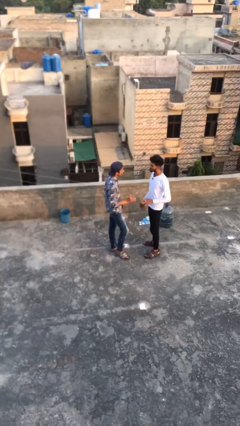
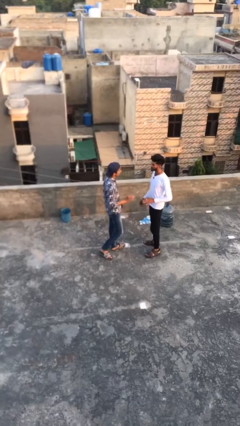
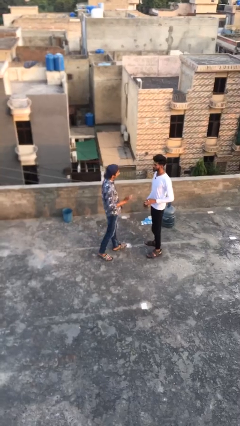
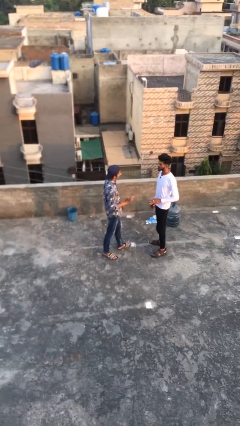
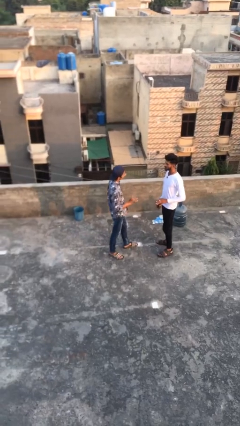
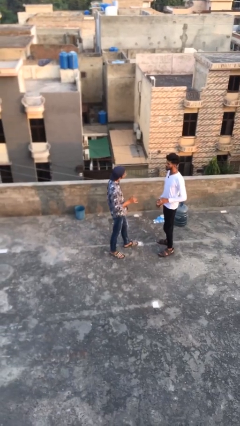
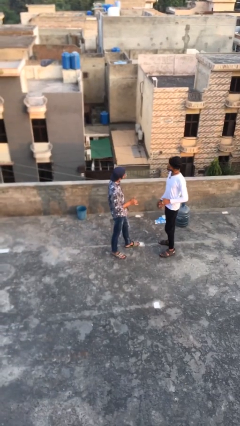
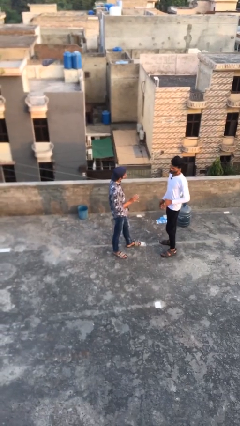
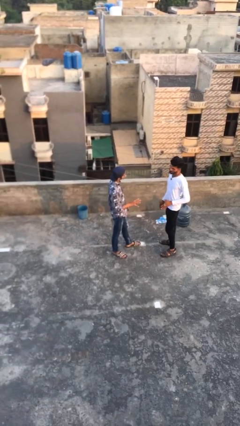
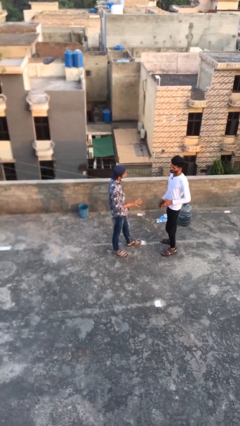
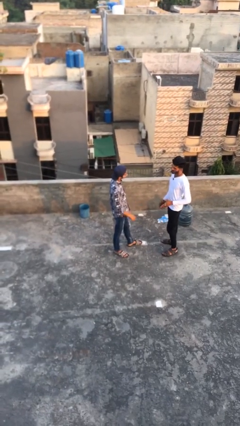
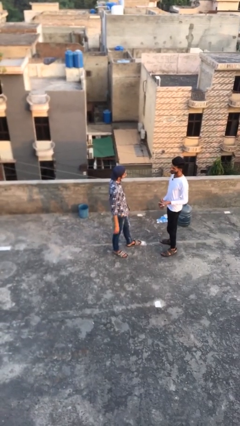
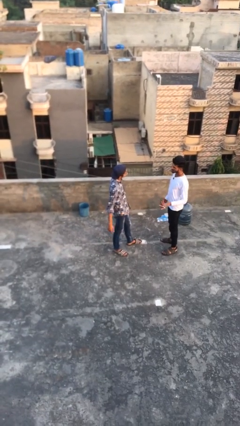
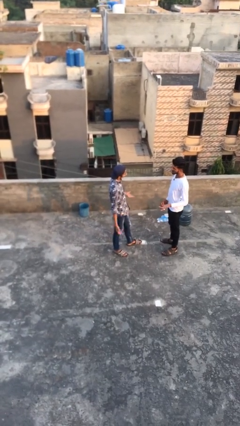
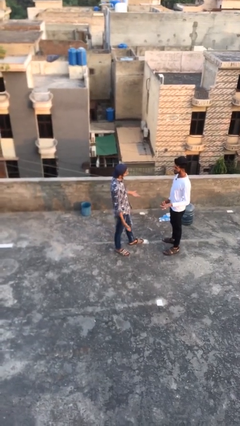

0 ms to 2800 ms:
person talks to person

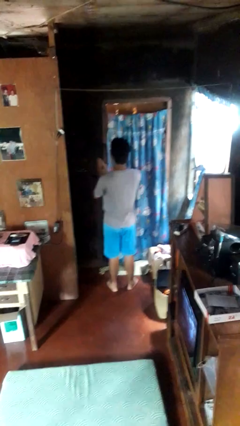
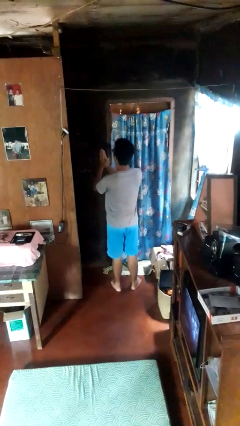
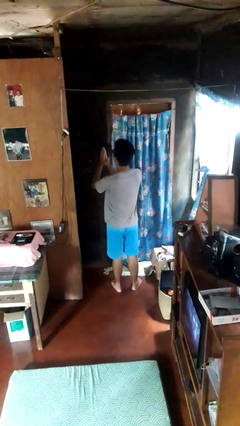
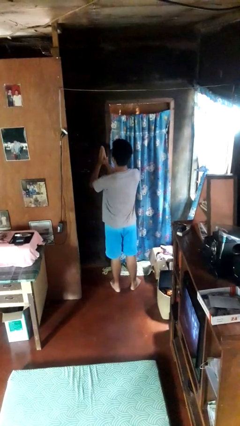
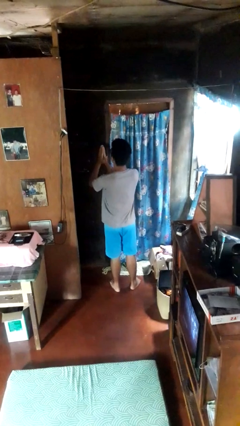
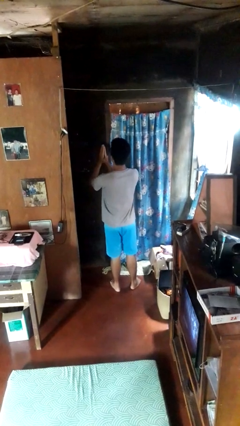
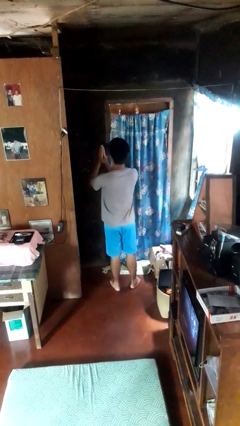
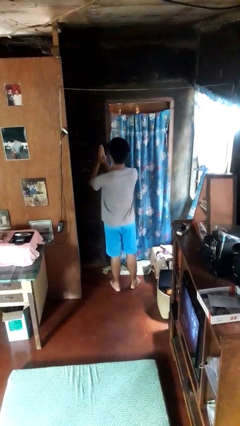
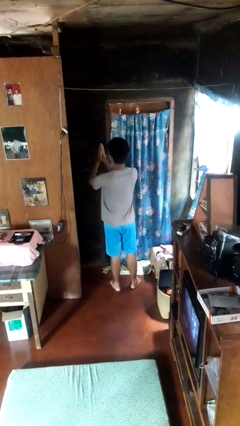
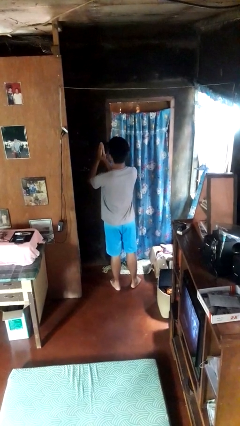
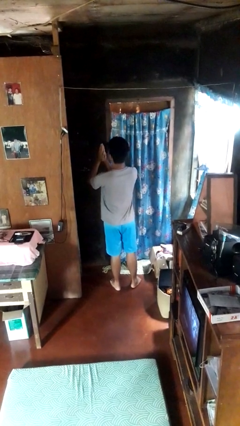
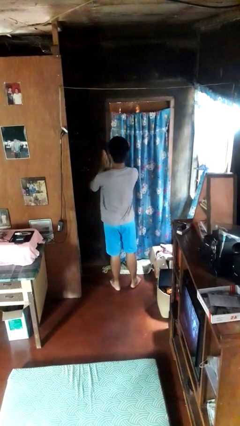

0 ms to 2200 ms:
person prays

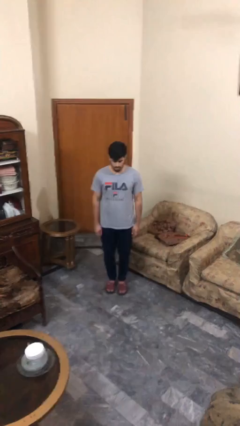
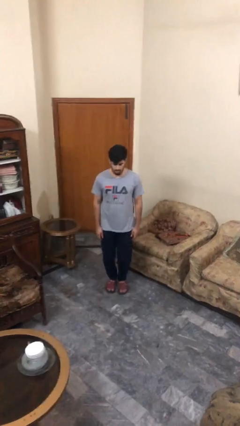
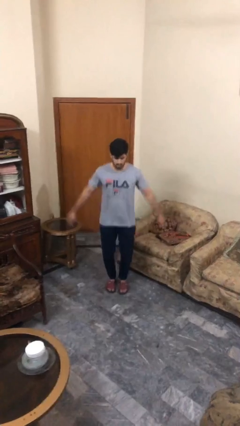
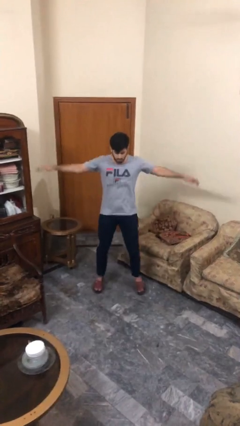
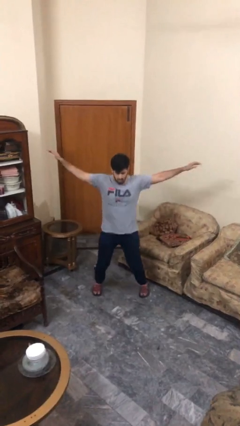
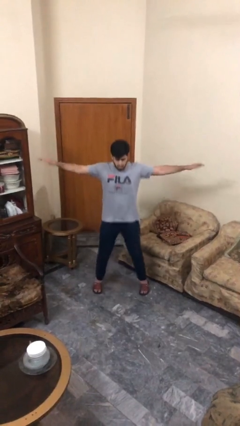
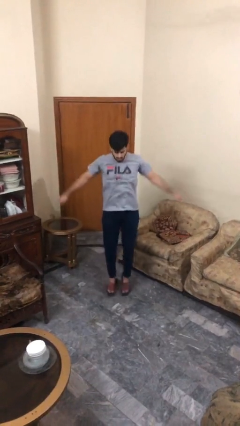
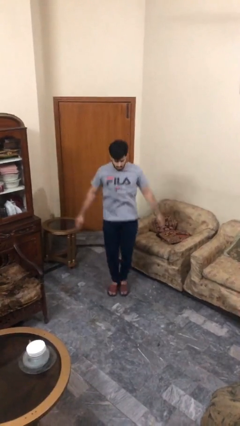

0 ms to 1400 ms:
person exercises with jumping jacks

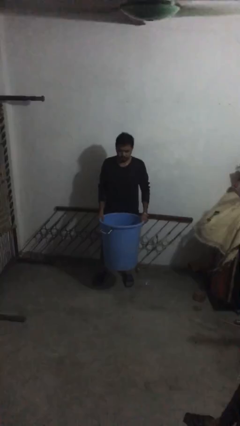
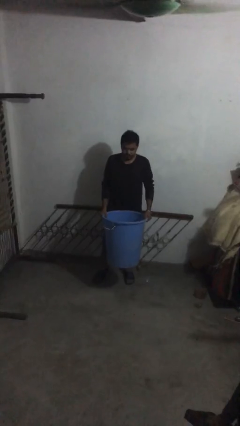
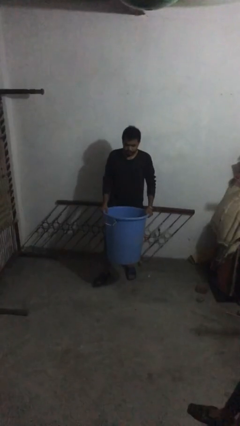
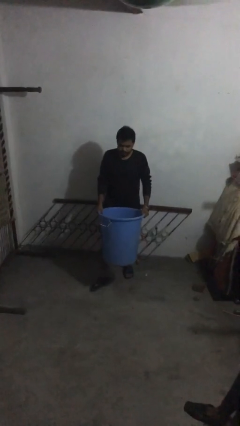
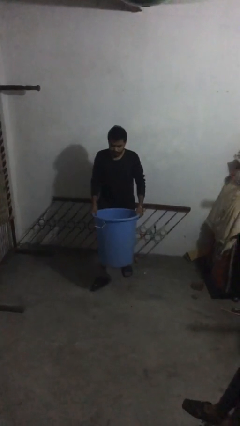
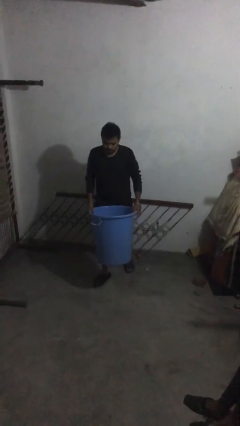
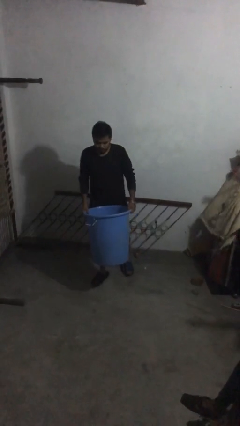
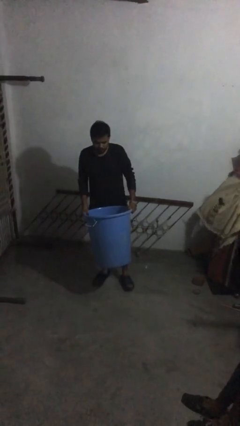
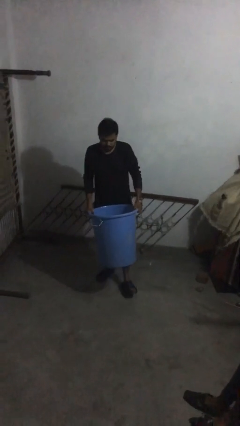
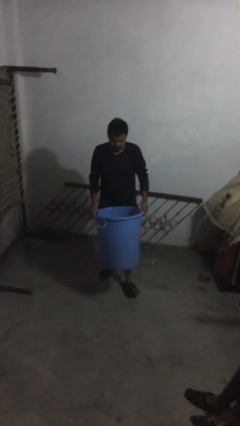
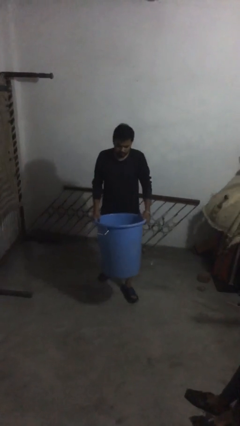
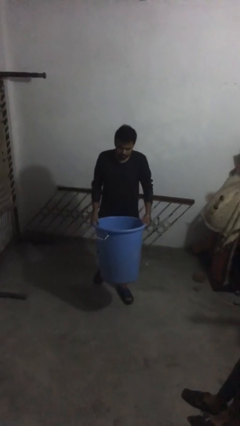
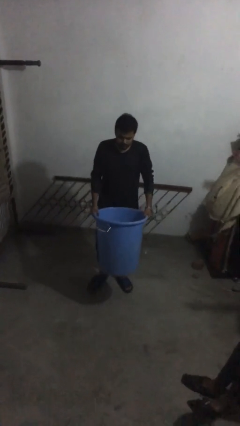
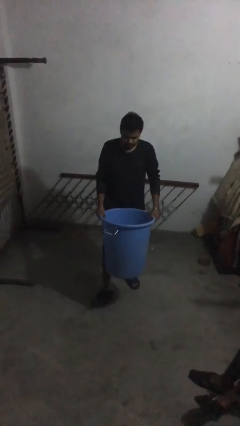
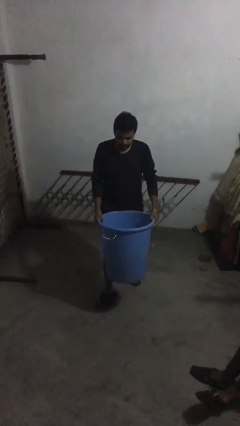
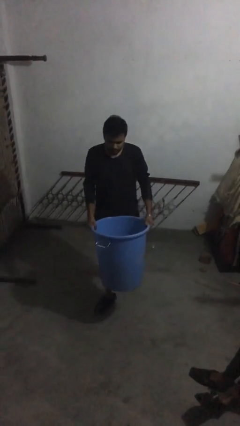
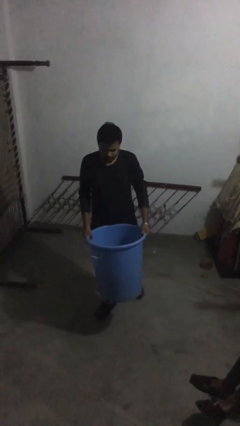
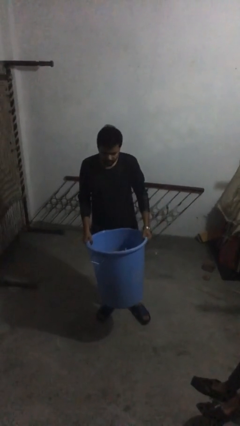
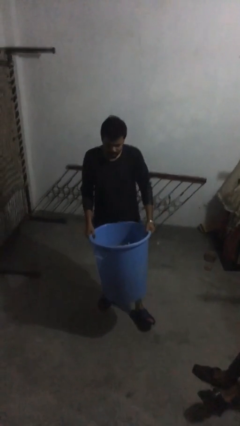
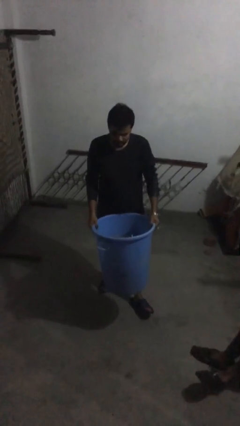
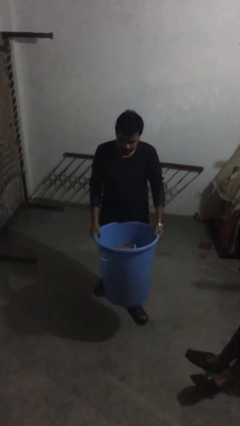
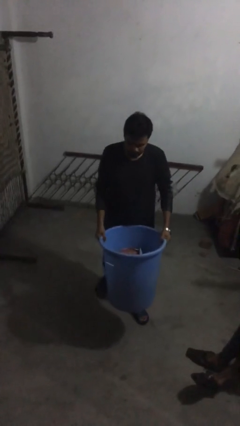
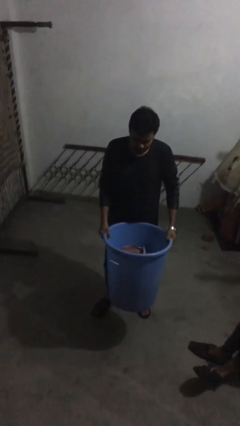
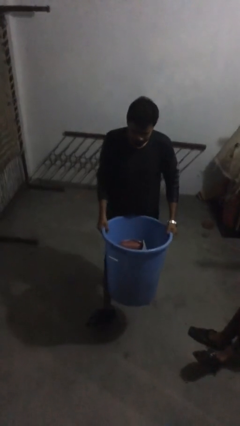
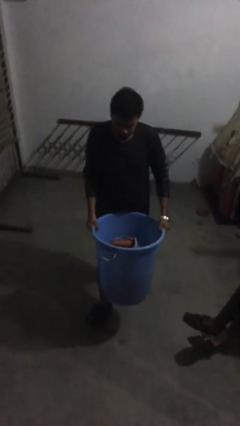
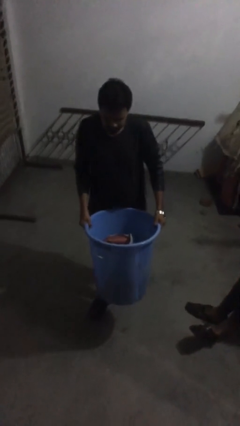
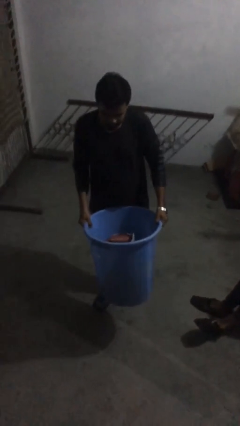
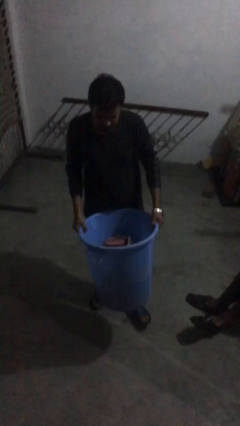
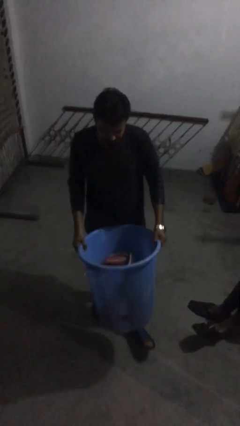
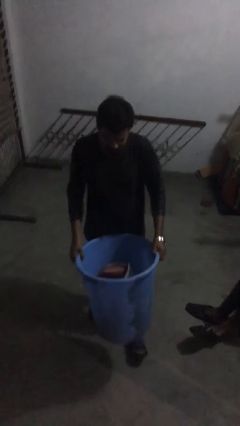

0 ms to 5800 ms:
person carries heavy object

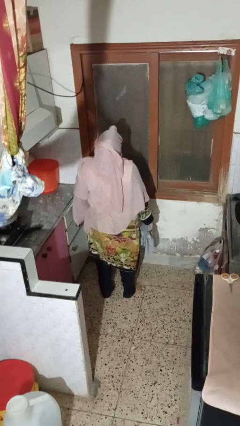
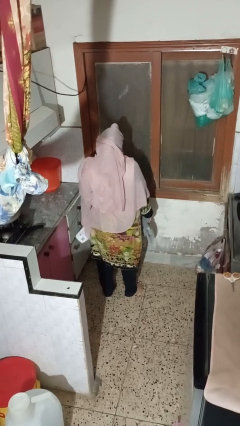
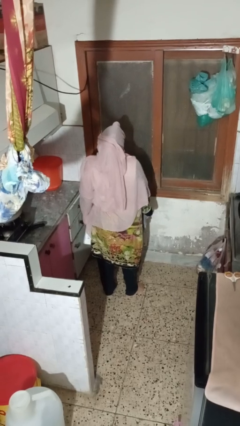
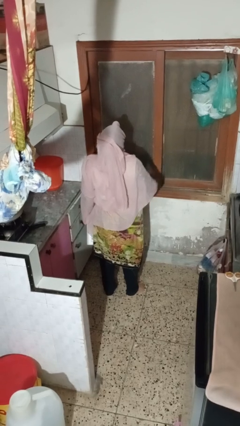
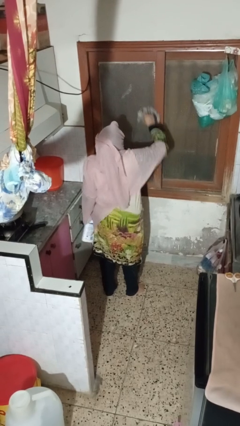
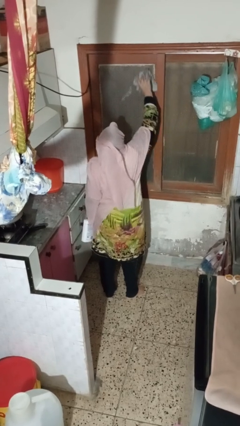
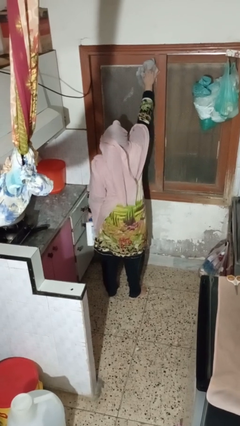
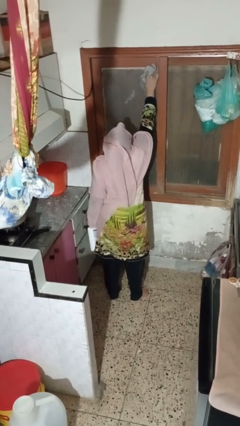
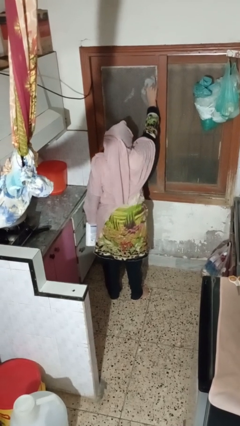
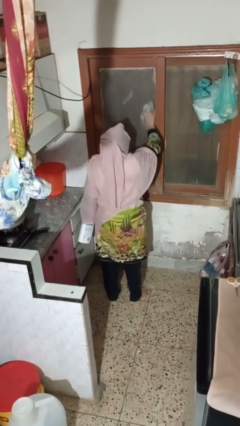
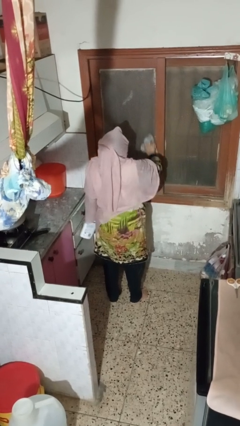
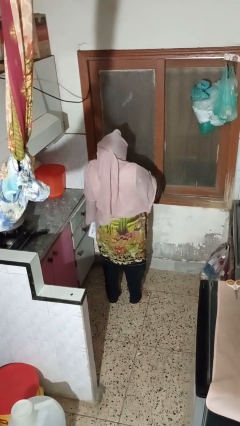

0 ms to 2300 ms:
person washes window

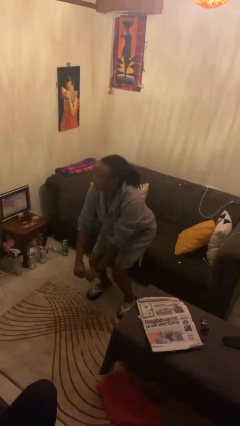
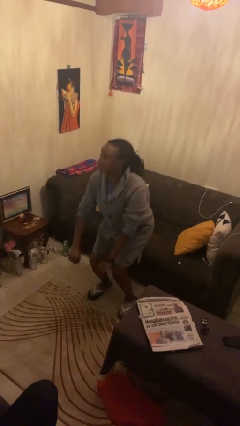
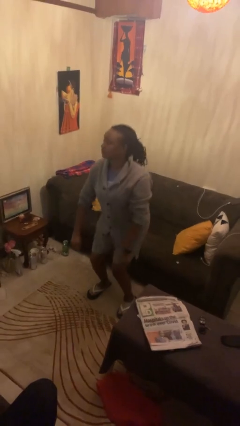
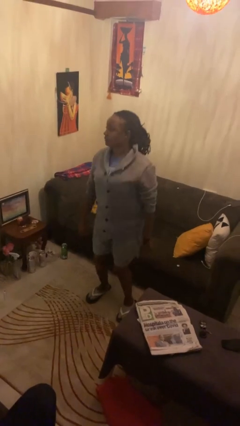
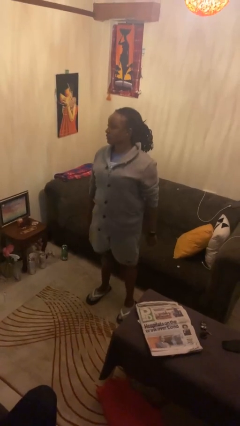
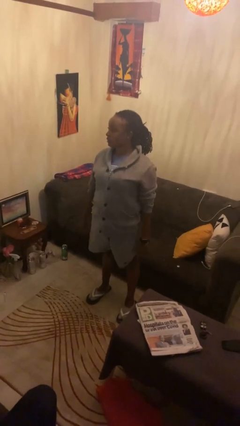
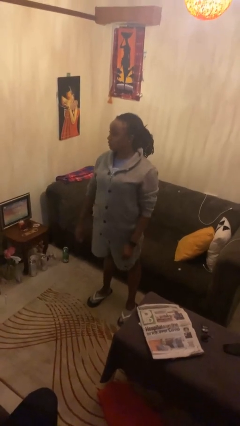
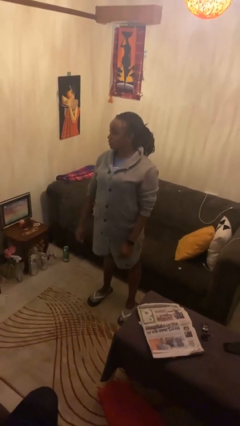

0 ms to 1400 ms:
person stands up

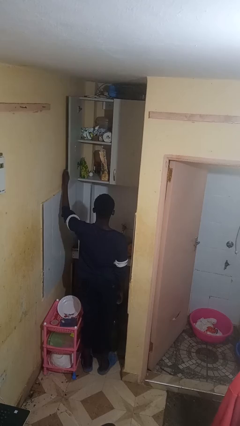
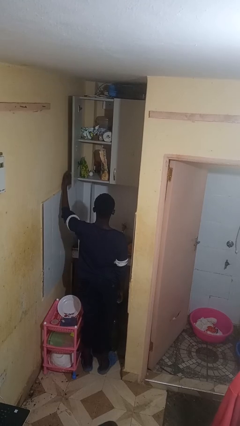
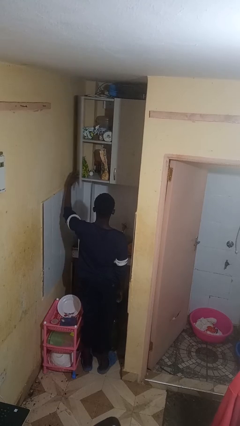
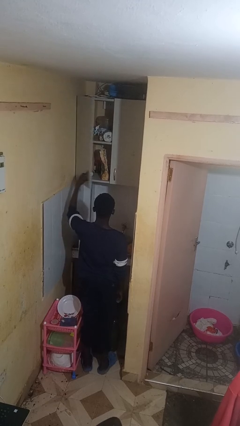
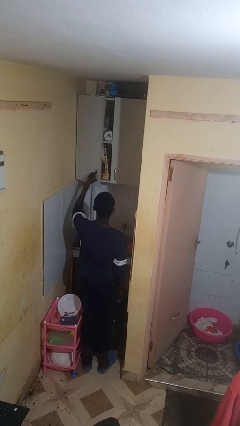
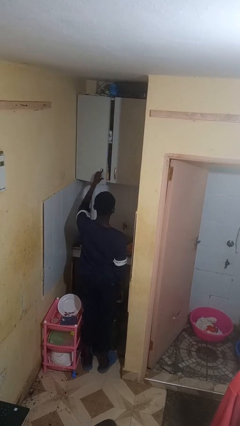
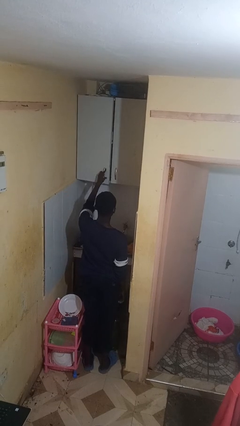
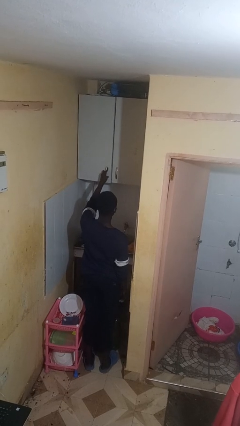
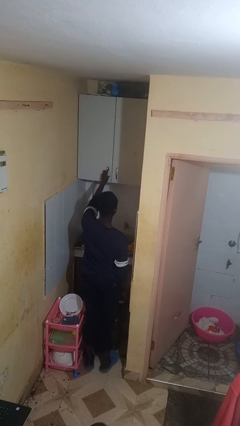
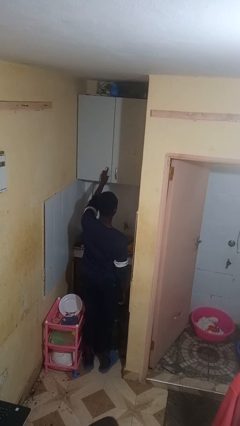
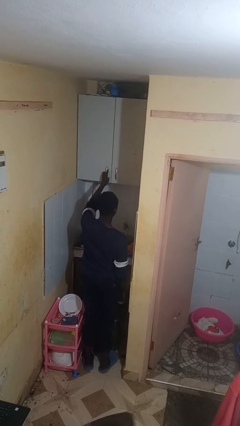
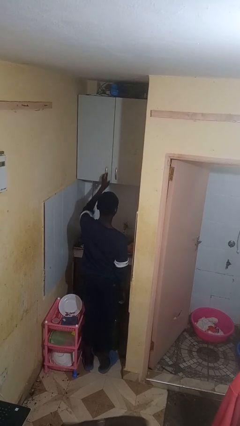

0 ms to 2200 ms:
person closes cabinet
